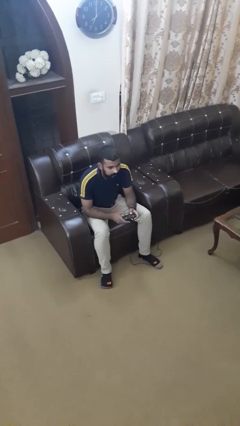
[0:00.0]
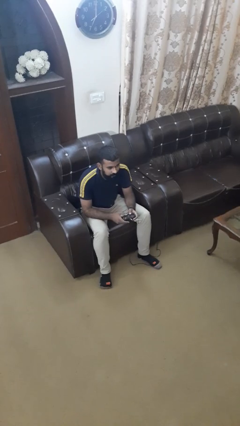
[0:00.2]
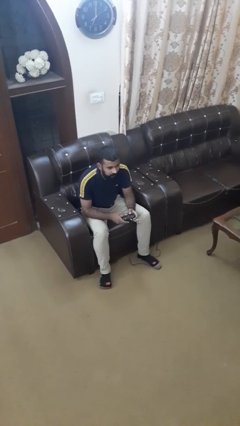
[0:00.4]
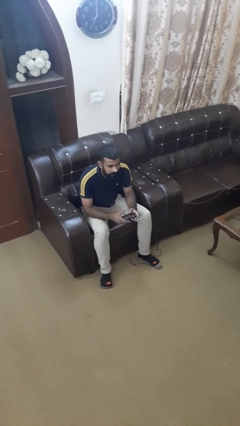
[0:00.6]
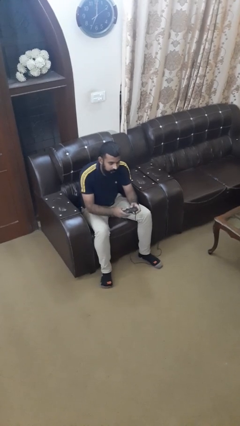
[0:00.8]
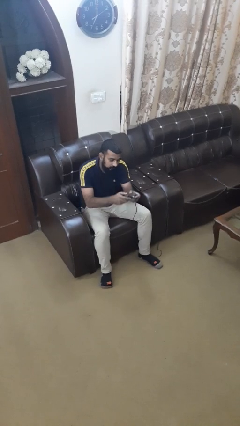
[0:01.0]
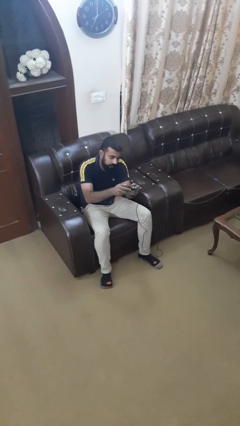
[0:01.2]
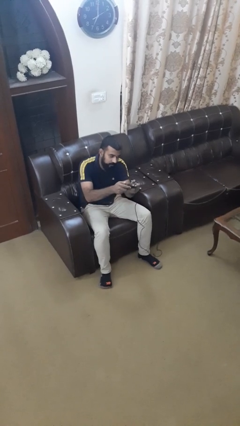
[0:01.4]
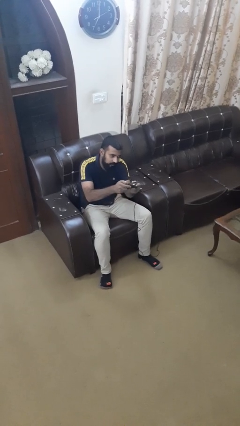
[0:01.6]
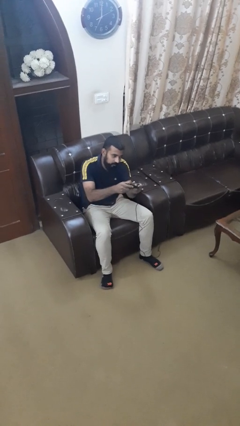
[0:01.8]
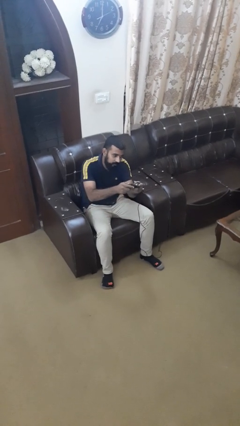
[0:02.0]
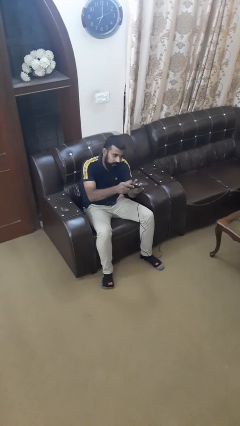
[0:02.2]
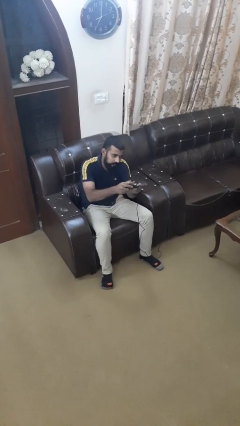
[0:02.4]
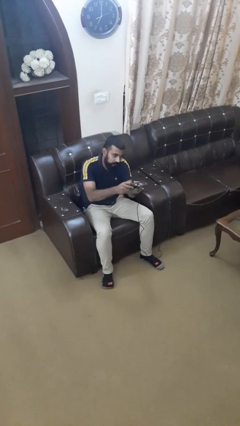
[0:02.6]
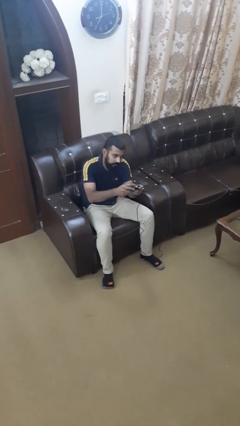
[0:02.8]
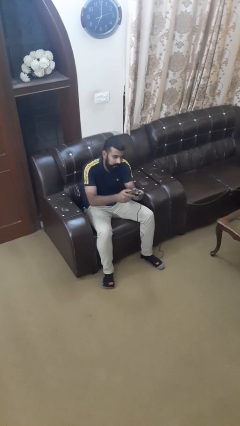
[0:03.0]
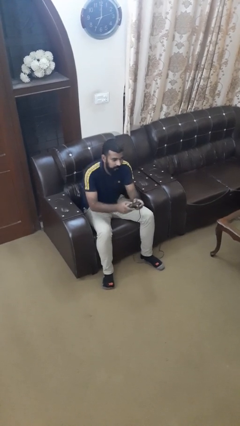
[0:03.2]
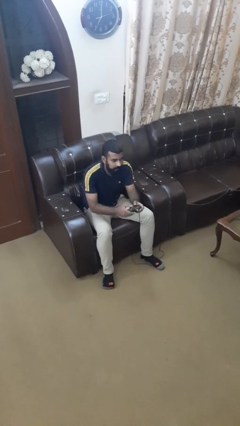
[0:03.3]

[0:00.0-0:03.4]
person interacts with handheld game

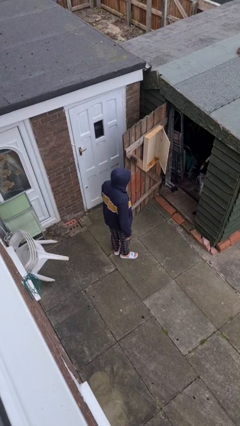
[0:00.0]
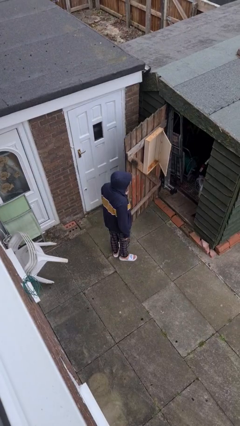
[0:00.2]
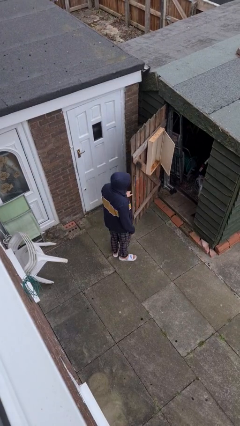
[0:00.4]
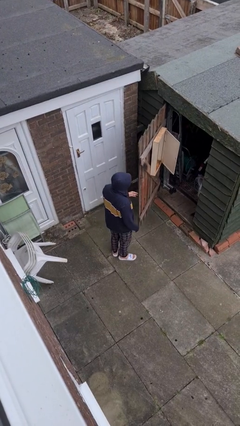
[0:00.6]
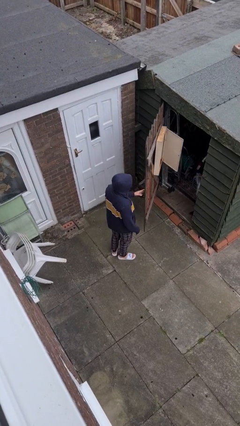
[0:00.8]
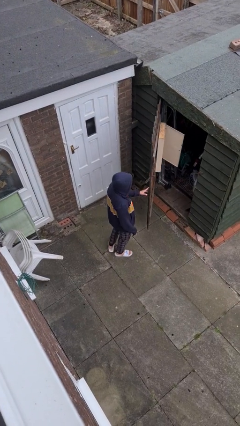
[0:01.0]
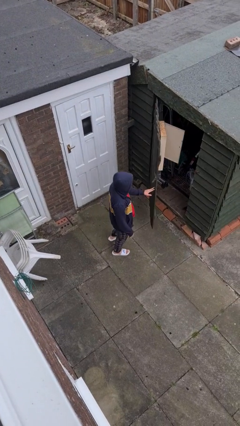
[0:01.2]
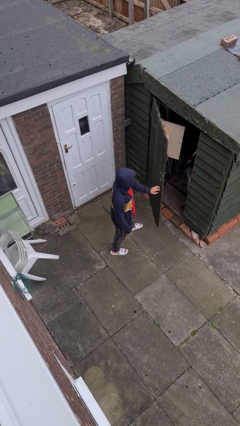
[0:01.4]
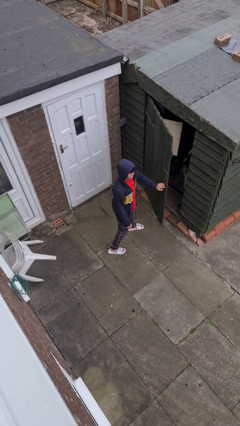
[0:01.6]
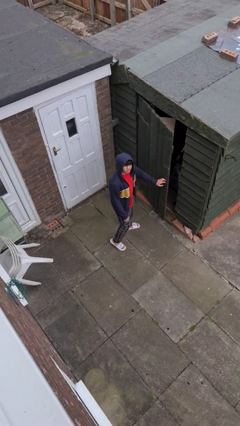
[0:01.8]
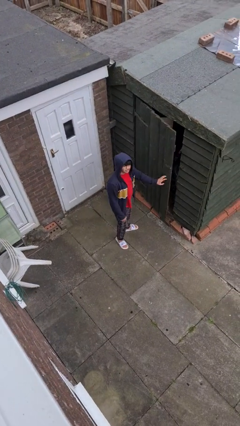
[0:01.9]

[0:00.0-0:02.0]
person closes facility door

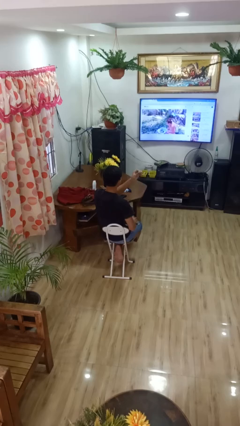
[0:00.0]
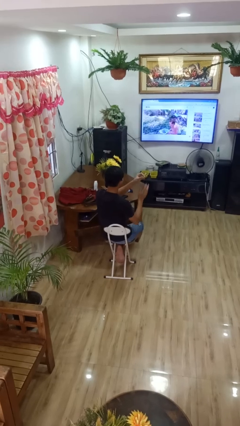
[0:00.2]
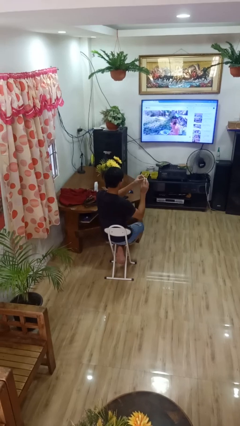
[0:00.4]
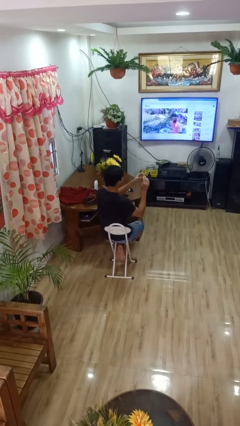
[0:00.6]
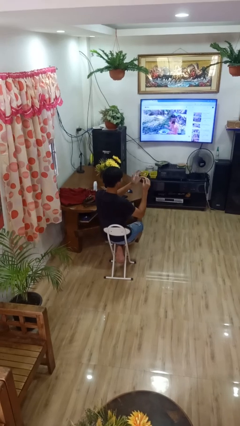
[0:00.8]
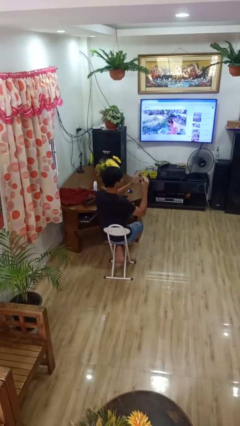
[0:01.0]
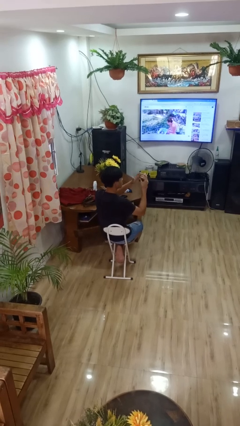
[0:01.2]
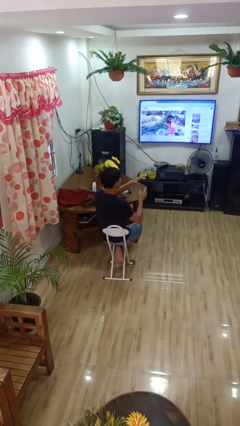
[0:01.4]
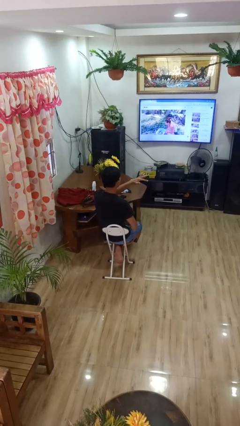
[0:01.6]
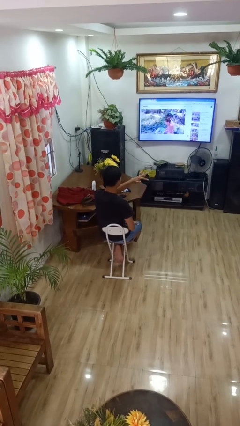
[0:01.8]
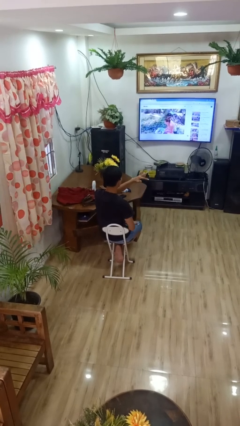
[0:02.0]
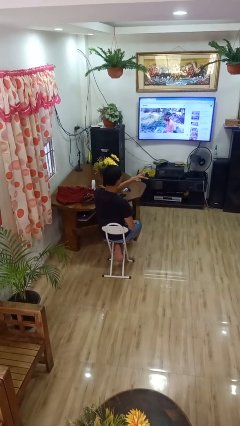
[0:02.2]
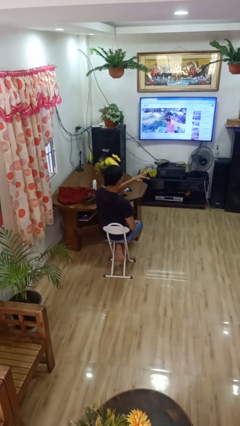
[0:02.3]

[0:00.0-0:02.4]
person puts on ring

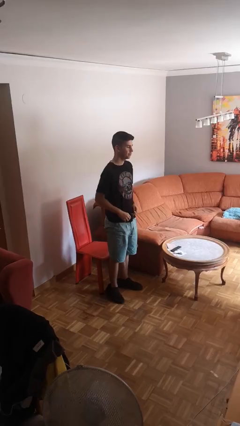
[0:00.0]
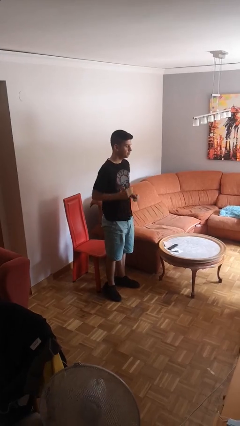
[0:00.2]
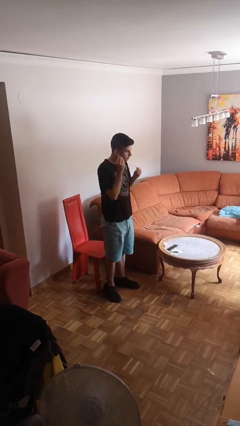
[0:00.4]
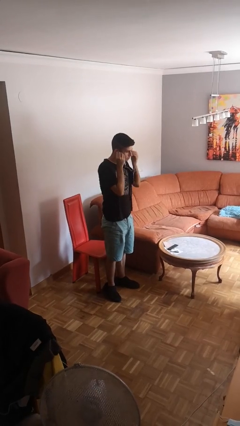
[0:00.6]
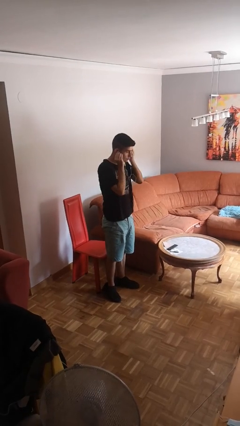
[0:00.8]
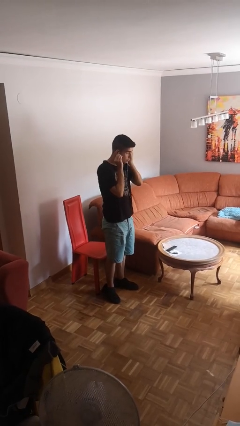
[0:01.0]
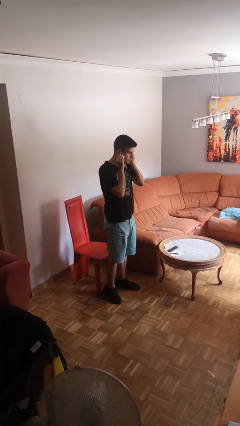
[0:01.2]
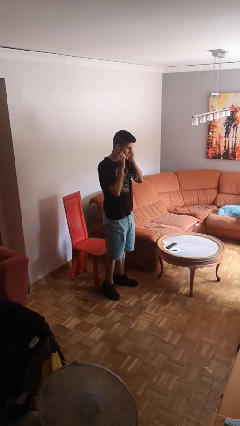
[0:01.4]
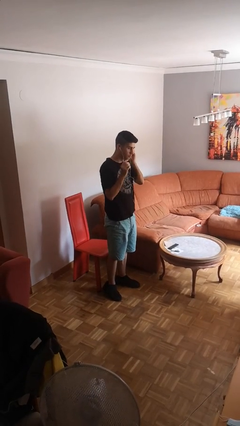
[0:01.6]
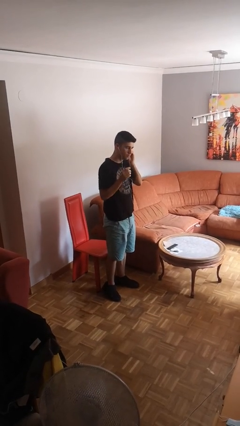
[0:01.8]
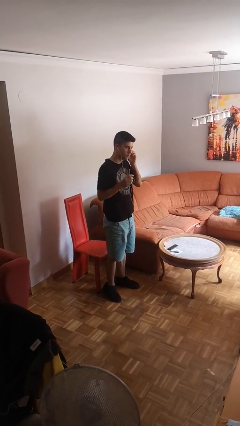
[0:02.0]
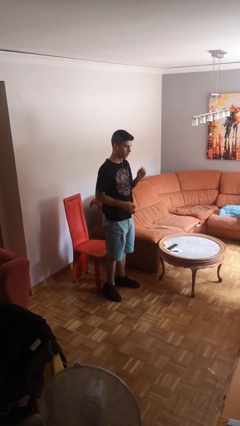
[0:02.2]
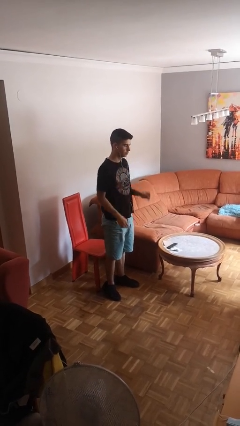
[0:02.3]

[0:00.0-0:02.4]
person puts on headphones

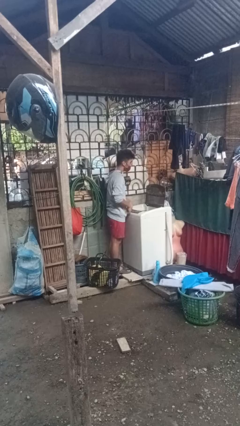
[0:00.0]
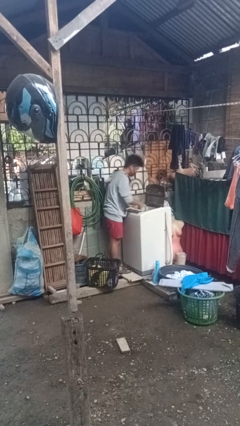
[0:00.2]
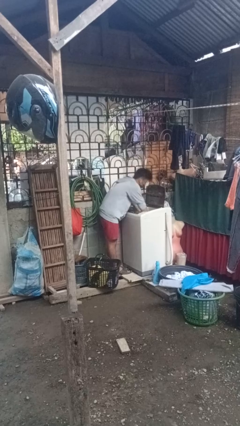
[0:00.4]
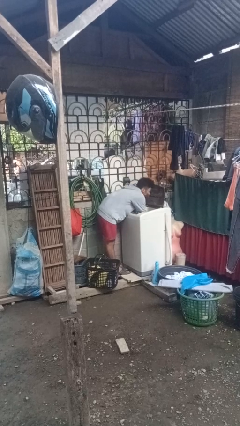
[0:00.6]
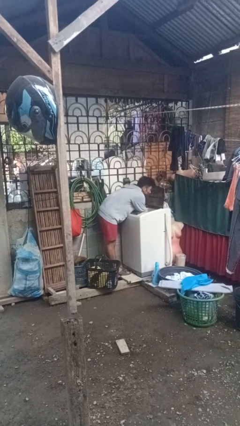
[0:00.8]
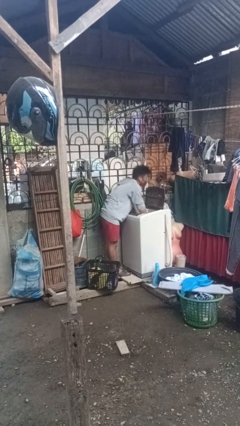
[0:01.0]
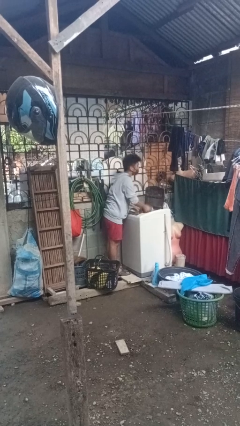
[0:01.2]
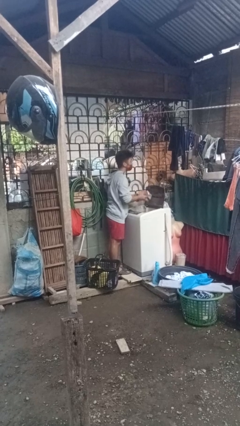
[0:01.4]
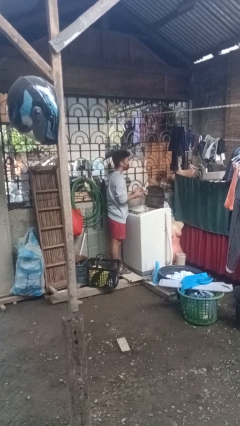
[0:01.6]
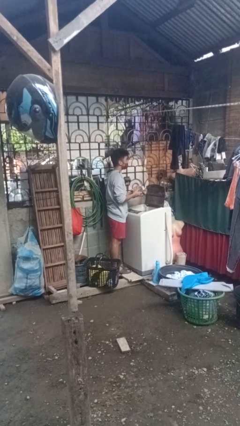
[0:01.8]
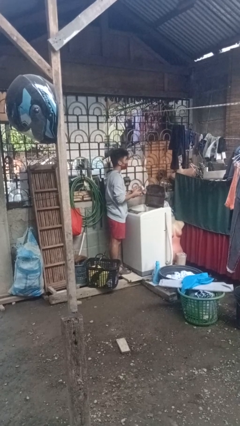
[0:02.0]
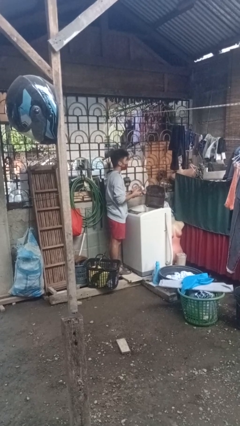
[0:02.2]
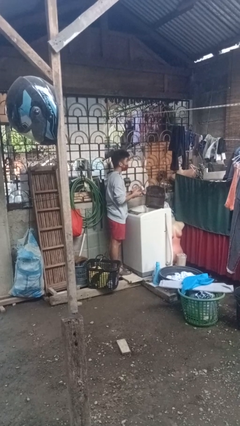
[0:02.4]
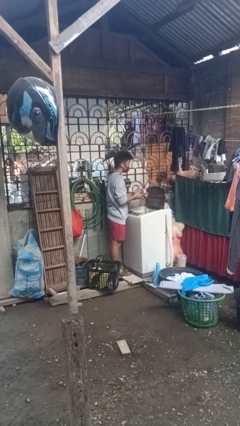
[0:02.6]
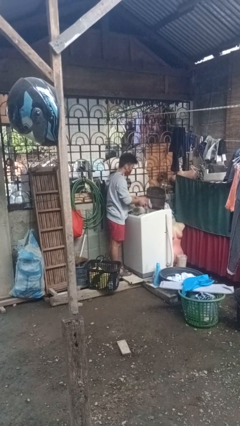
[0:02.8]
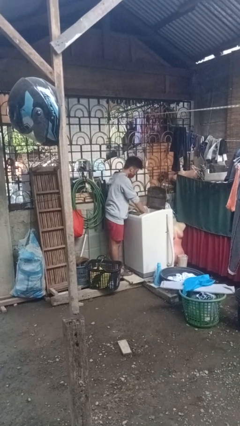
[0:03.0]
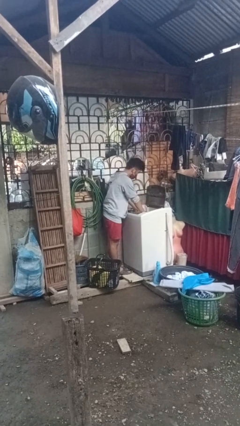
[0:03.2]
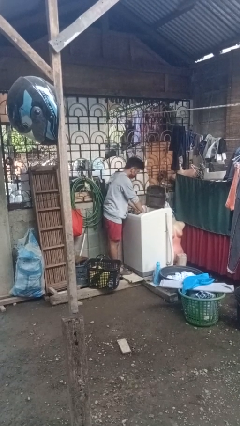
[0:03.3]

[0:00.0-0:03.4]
person unloads clotheswasher

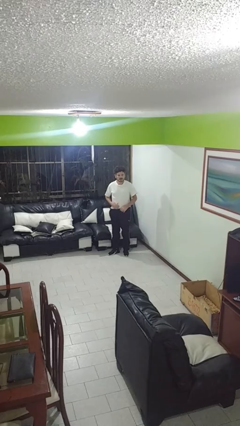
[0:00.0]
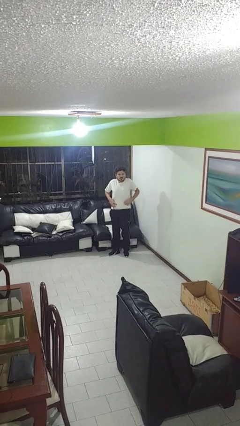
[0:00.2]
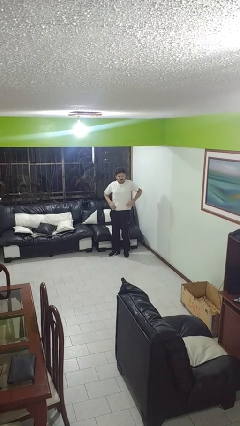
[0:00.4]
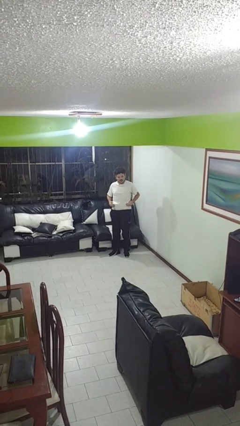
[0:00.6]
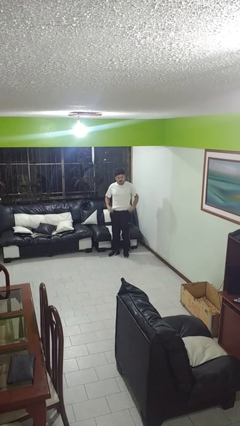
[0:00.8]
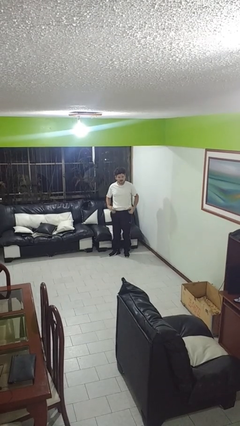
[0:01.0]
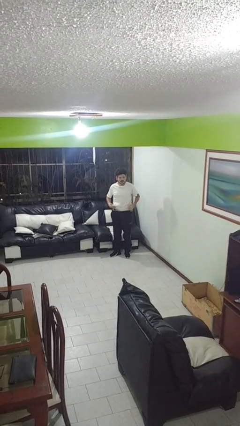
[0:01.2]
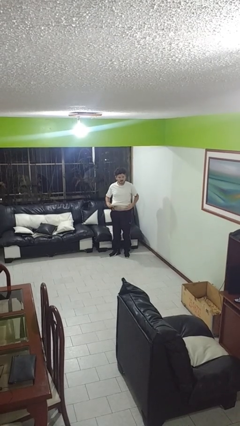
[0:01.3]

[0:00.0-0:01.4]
person untucks shirt

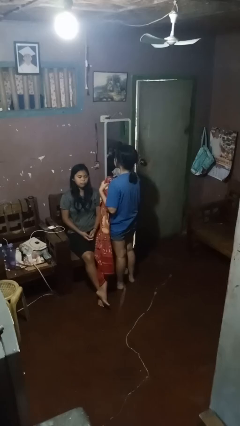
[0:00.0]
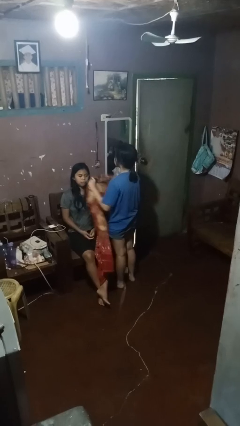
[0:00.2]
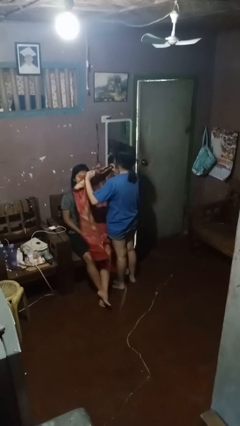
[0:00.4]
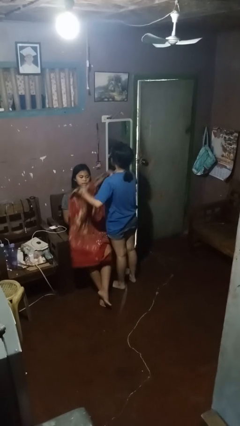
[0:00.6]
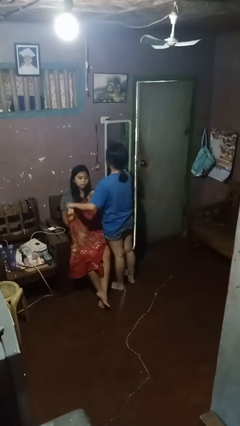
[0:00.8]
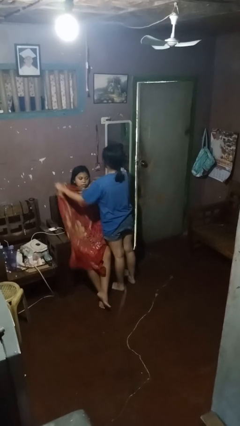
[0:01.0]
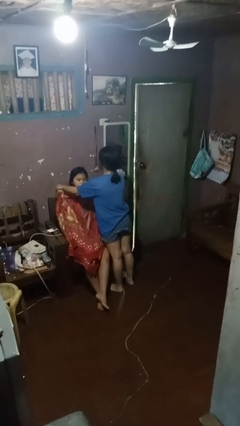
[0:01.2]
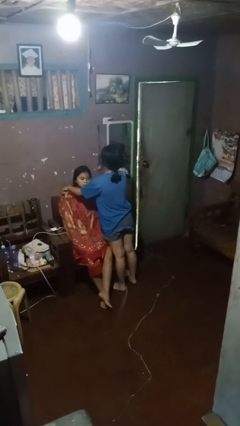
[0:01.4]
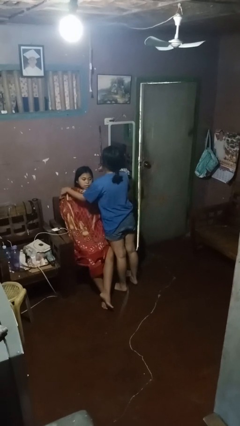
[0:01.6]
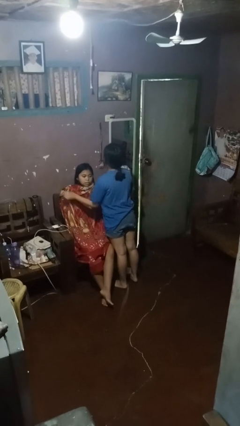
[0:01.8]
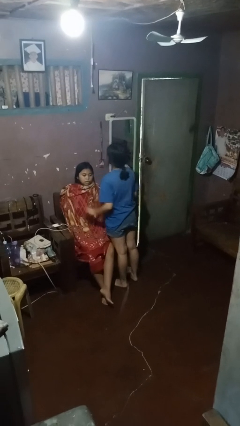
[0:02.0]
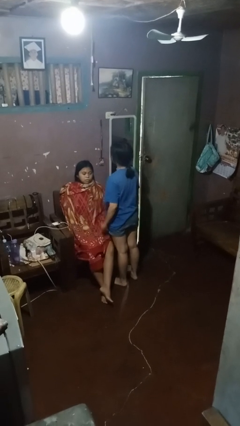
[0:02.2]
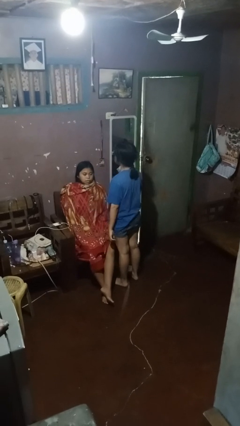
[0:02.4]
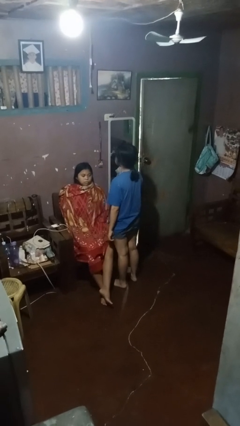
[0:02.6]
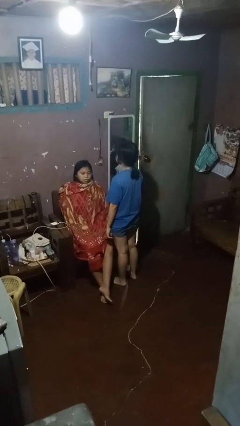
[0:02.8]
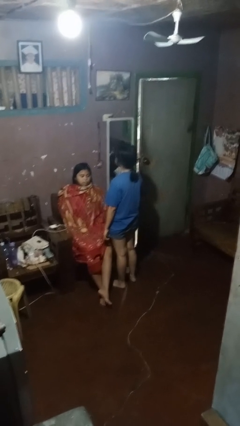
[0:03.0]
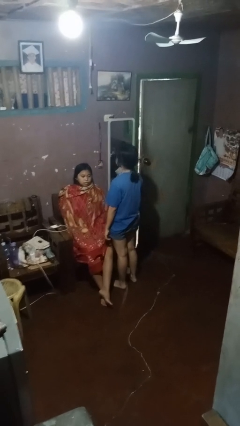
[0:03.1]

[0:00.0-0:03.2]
person covers friend with blanket
